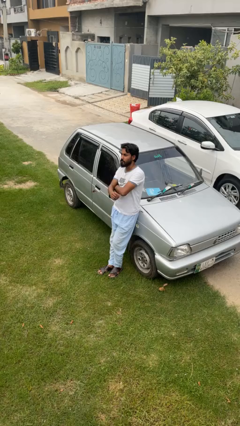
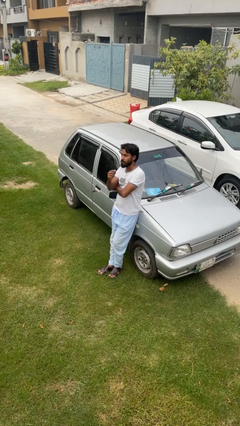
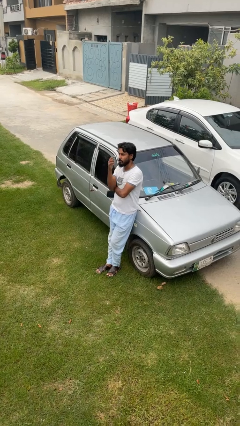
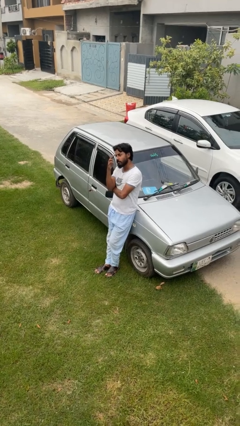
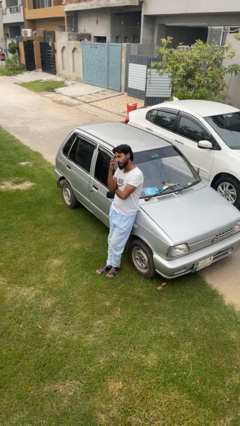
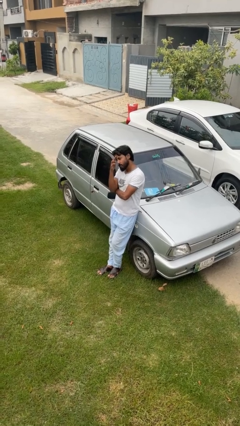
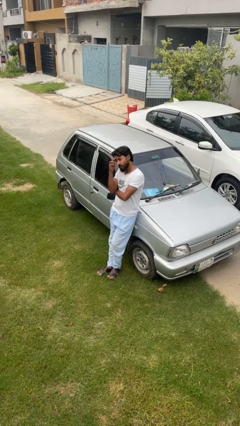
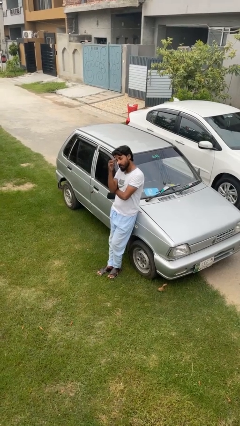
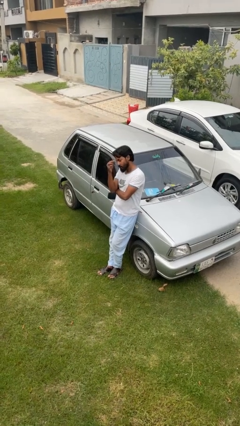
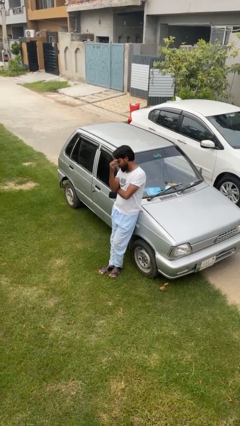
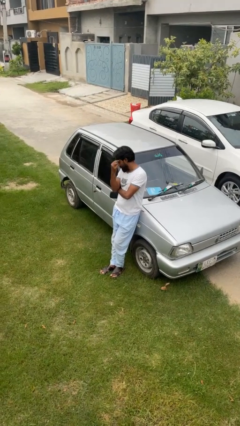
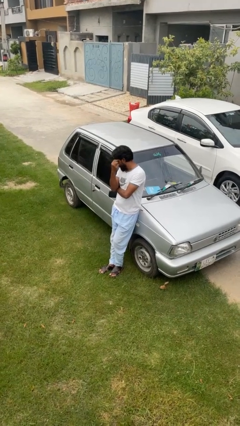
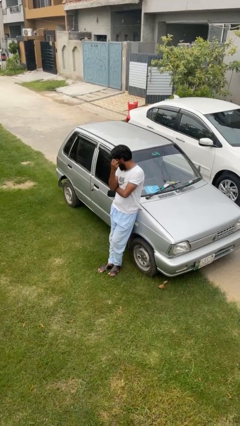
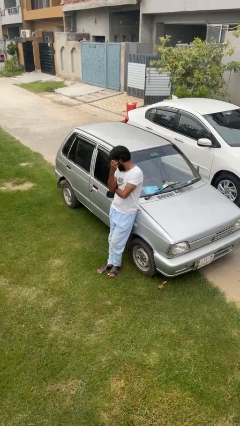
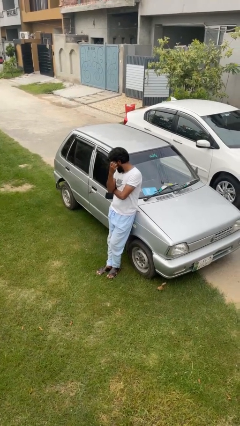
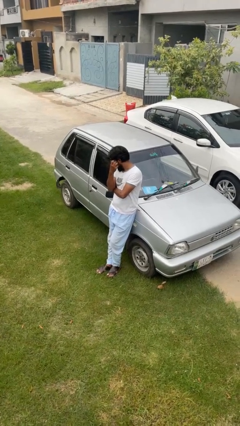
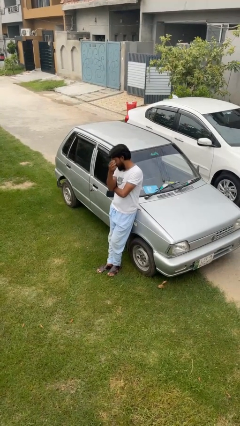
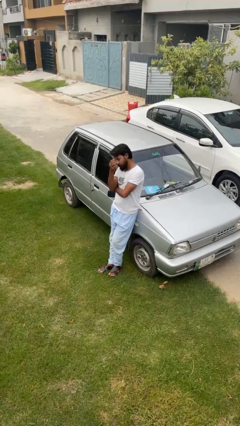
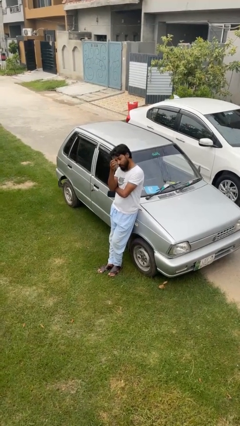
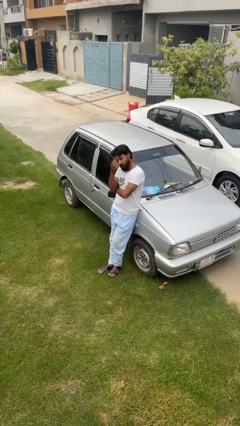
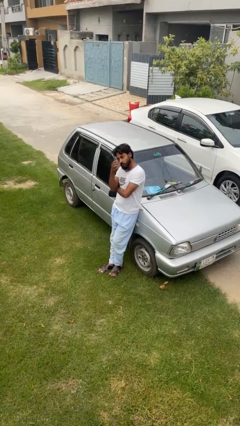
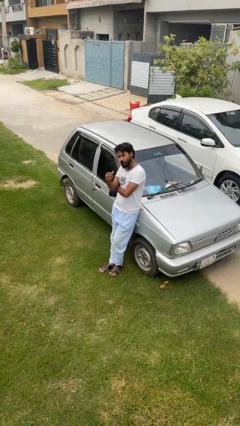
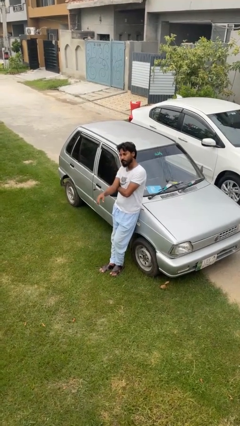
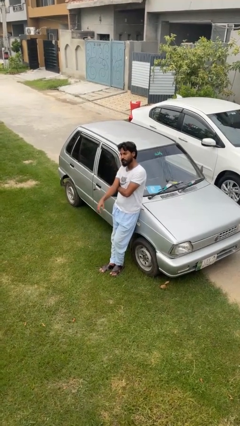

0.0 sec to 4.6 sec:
person scratches face

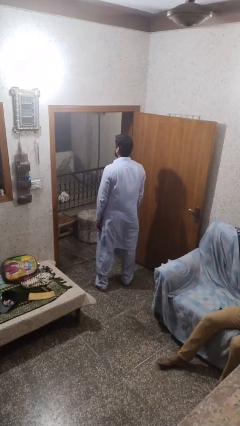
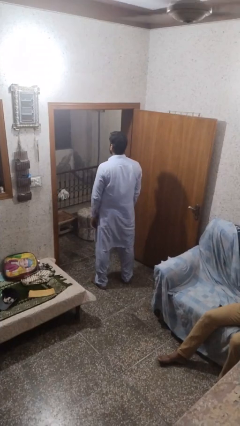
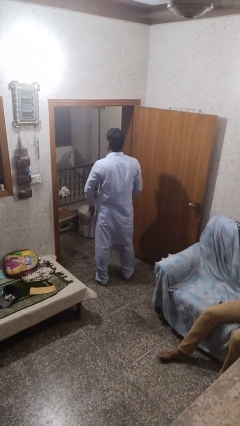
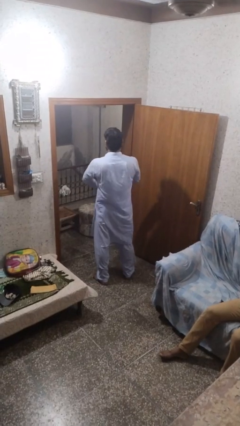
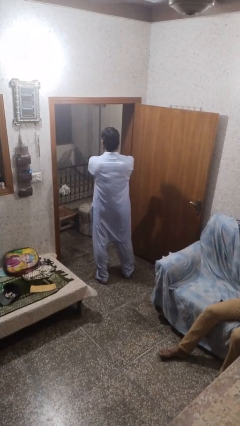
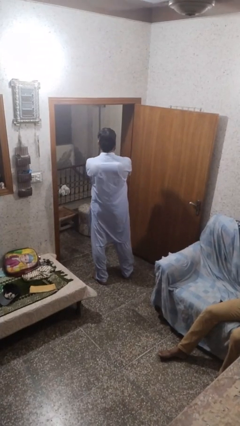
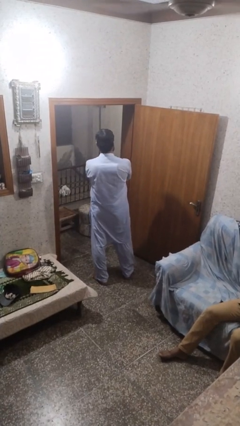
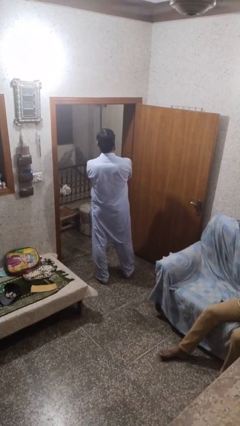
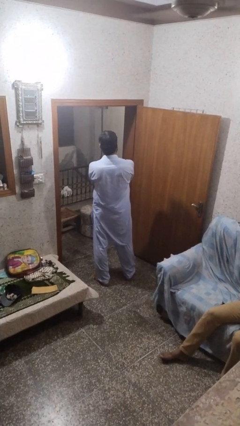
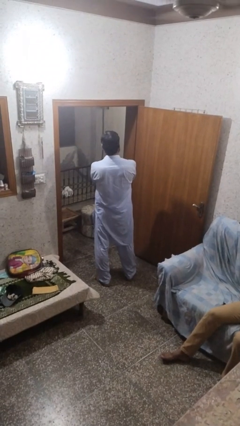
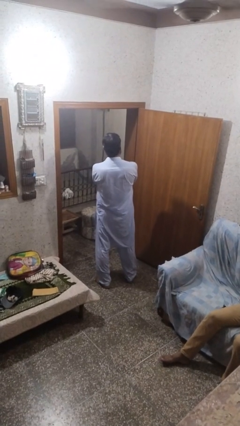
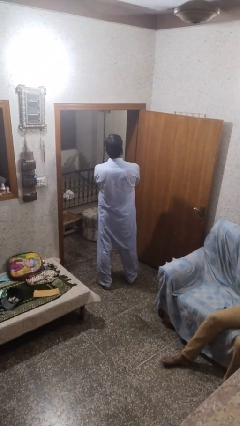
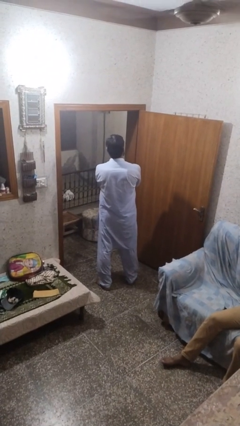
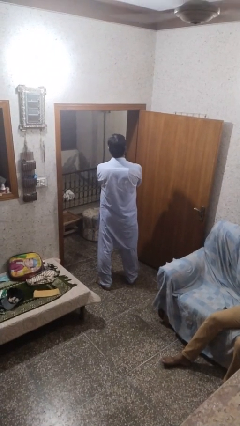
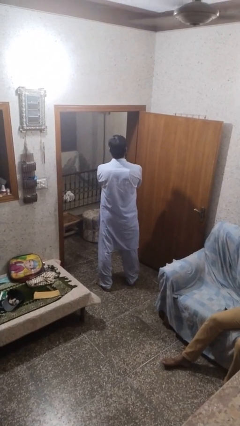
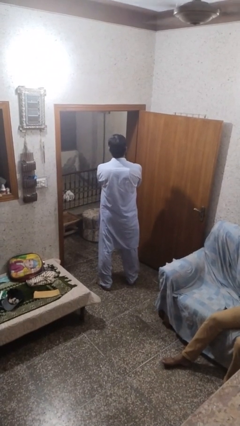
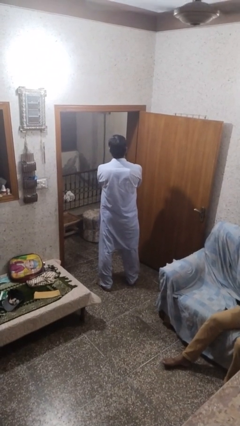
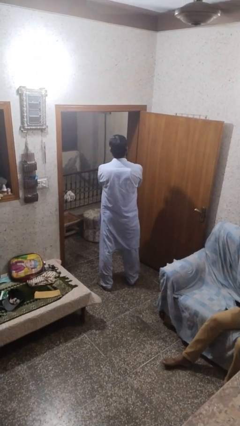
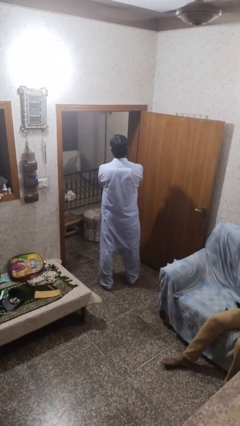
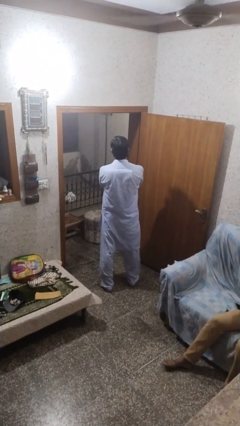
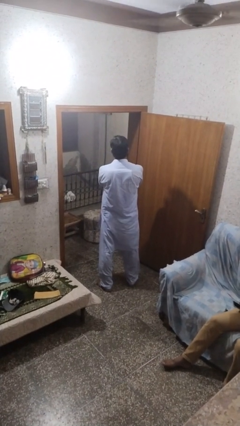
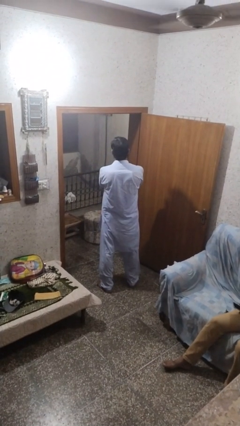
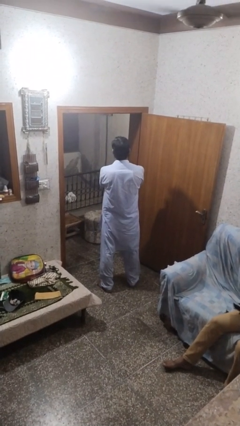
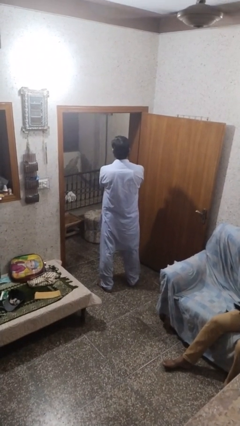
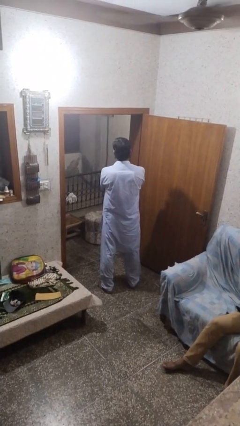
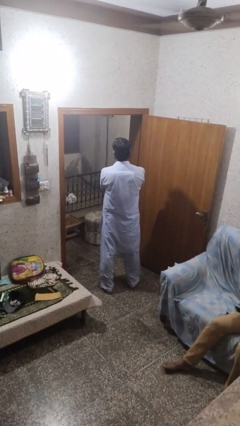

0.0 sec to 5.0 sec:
person crosses arms

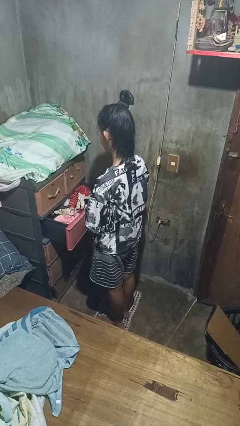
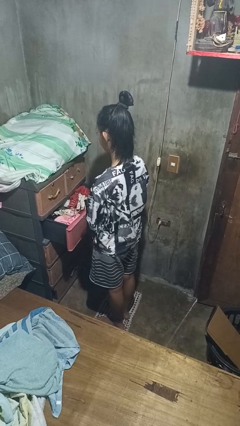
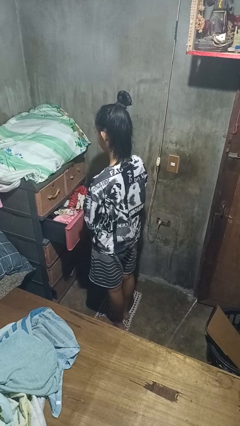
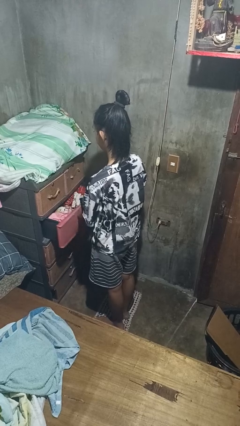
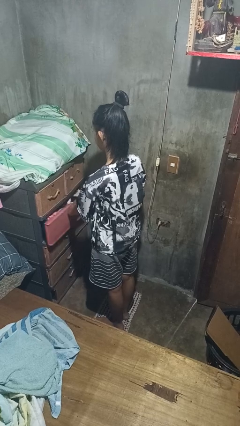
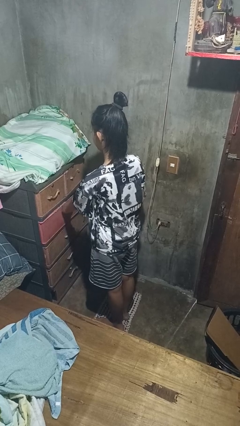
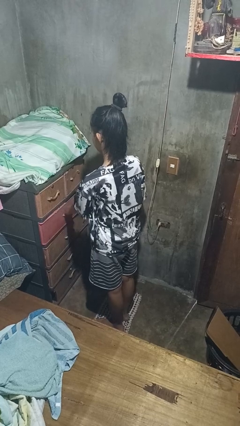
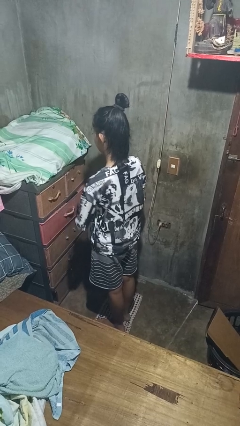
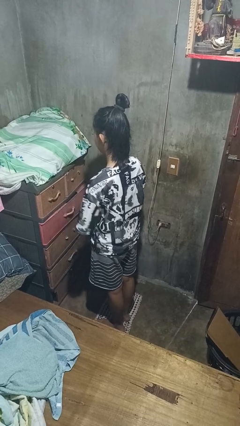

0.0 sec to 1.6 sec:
person closes dresser drawer

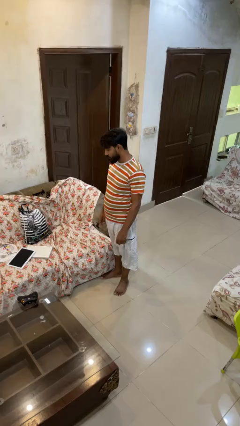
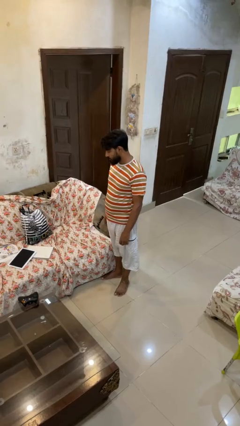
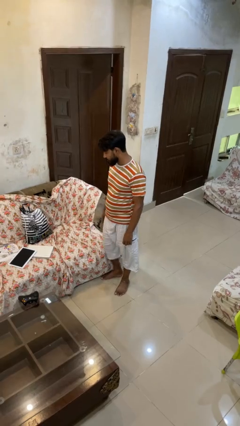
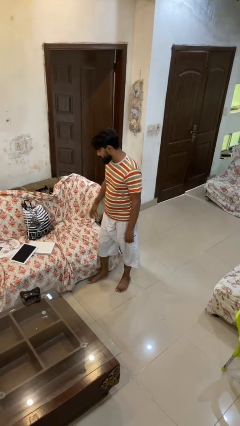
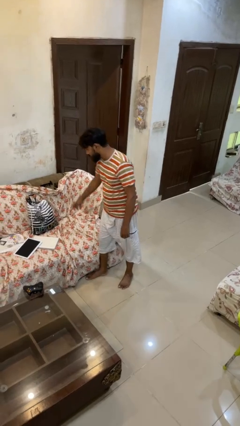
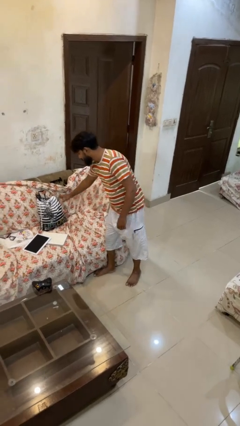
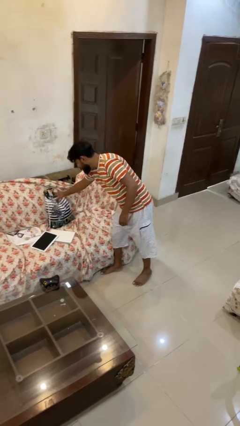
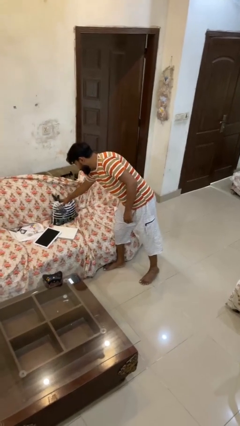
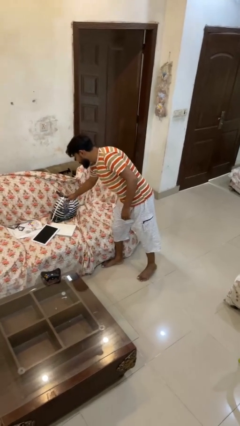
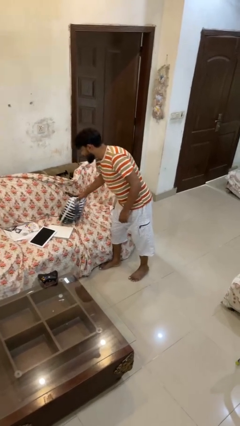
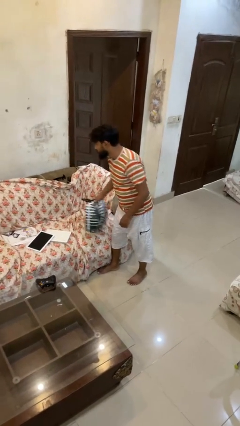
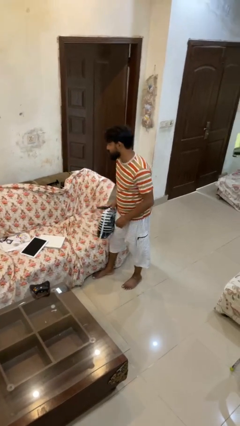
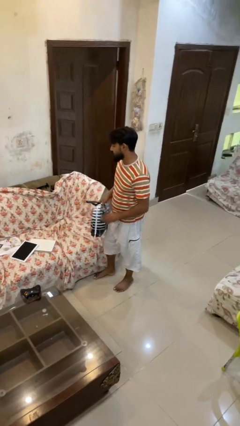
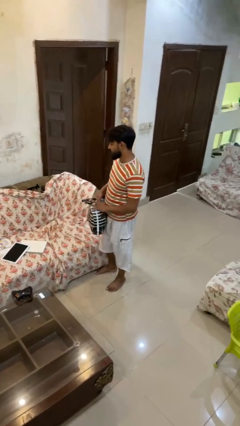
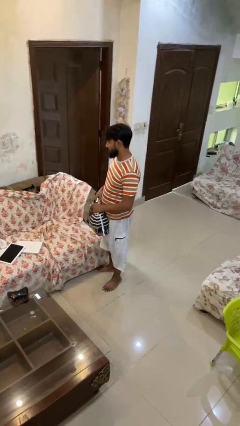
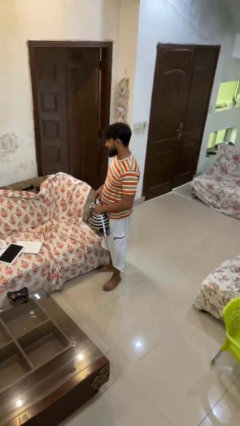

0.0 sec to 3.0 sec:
person picks up object from couch

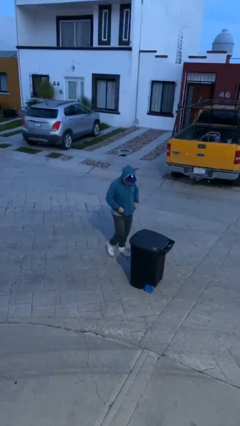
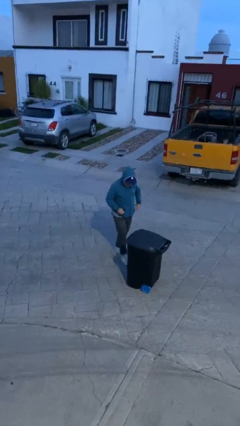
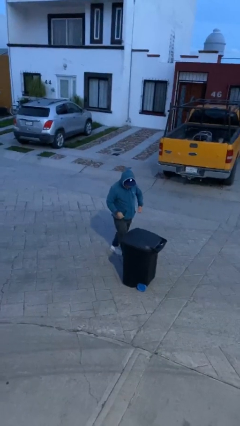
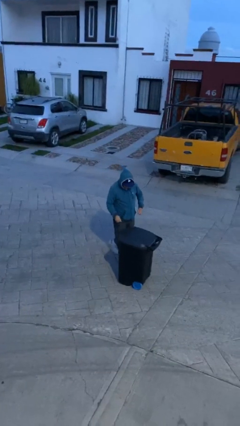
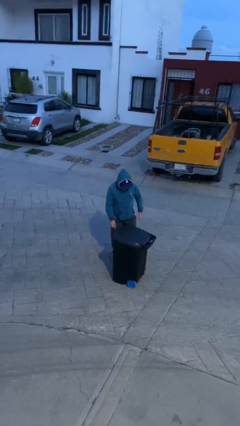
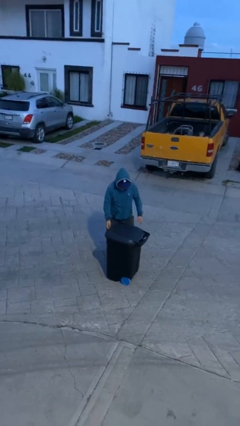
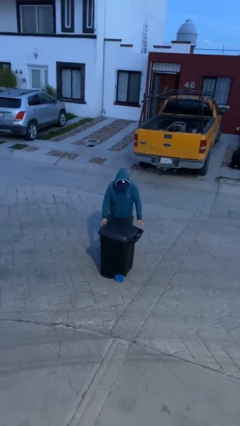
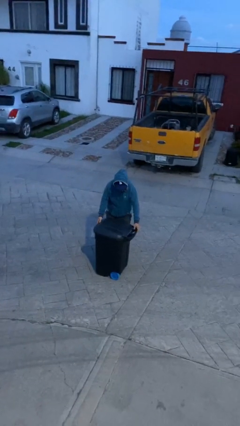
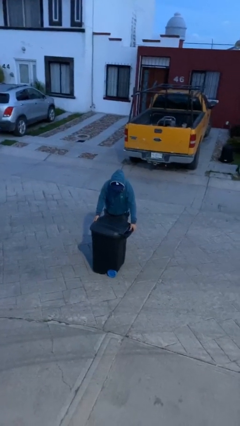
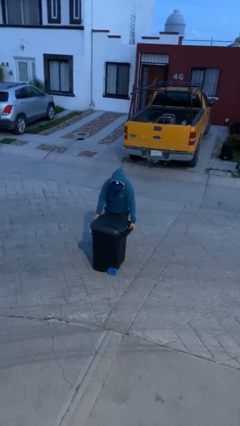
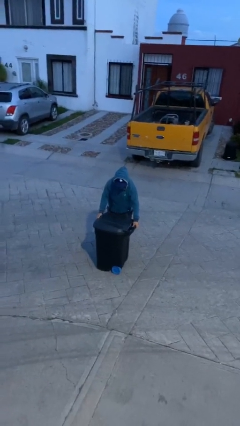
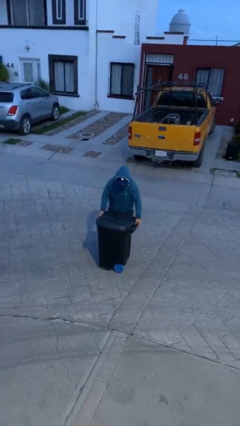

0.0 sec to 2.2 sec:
person picks up object from floor

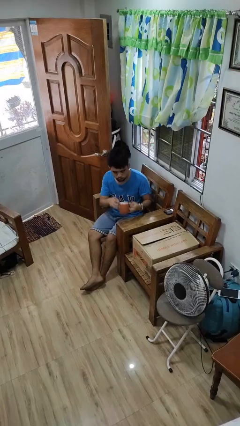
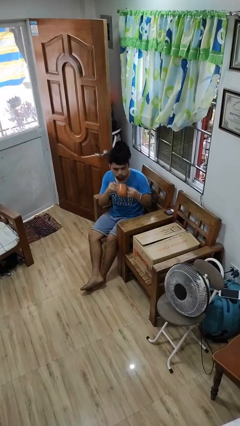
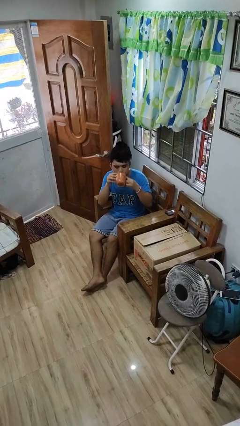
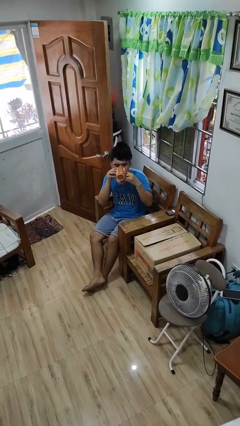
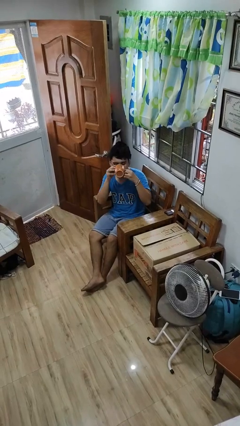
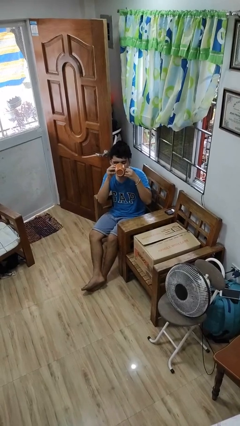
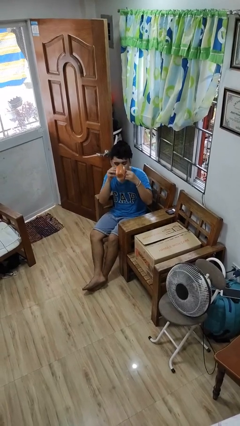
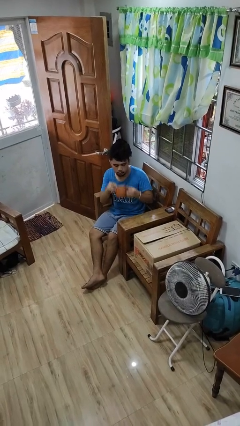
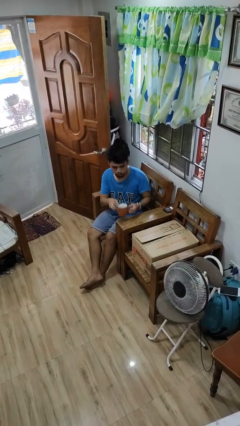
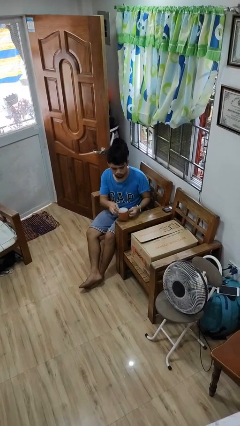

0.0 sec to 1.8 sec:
person drinks from mug
